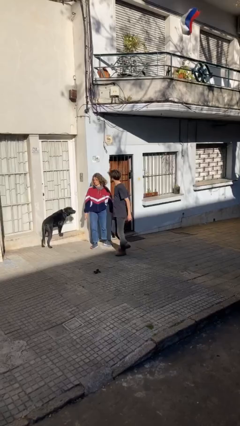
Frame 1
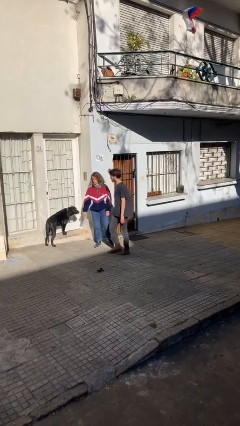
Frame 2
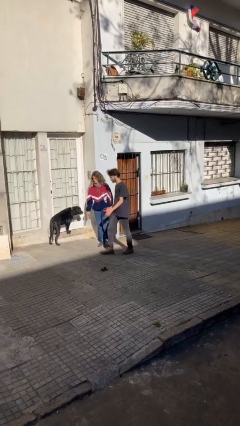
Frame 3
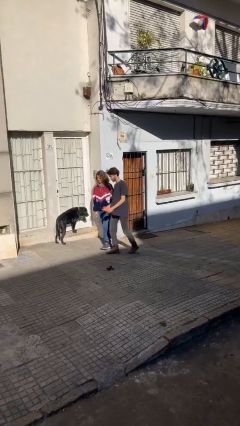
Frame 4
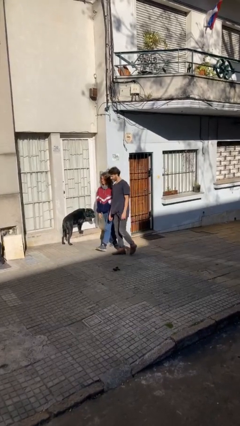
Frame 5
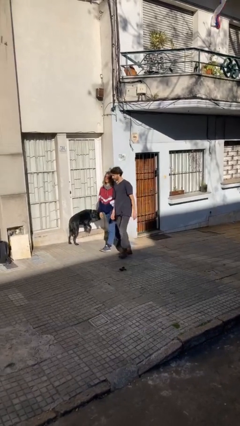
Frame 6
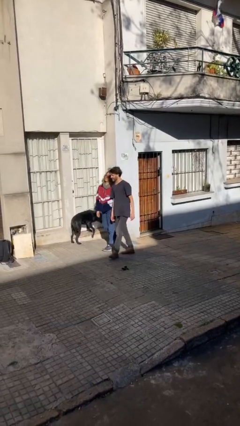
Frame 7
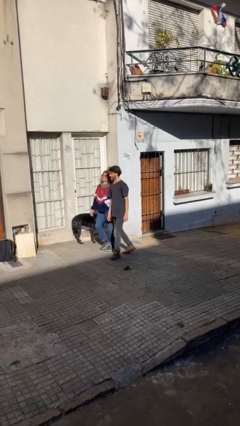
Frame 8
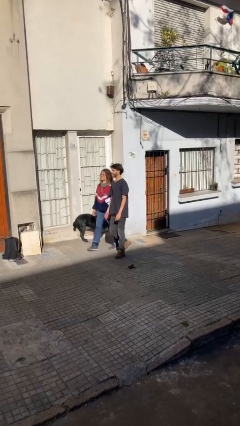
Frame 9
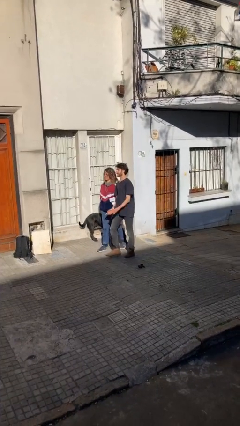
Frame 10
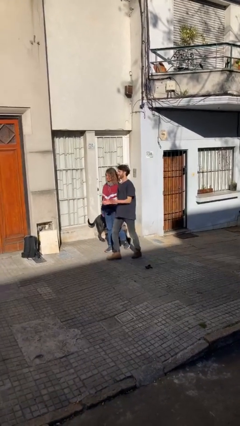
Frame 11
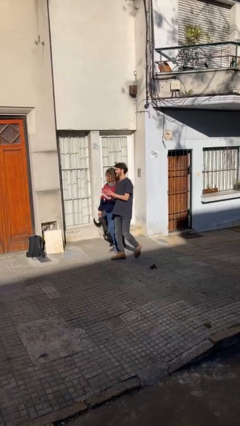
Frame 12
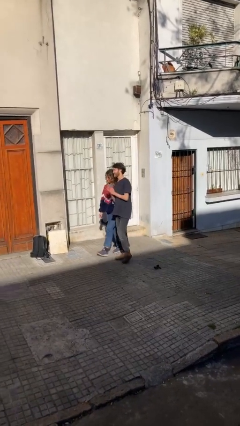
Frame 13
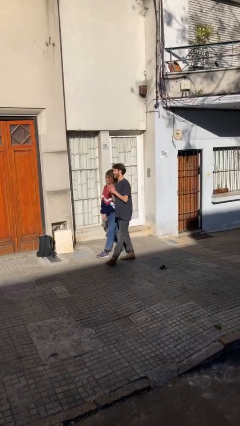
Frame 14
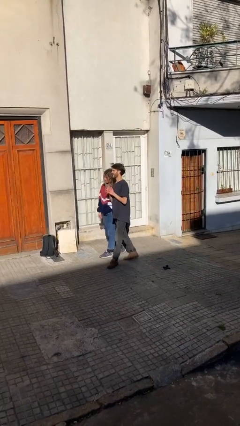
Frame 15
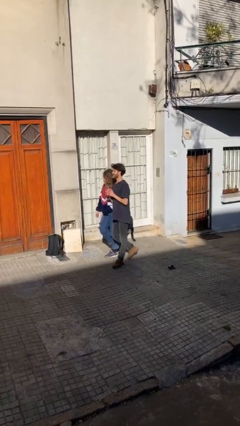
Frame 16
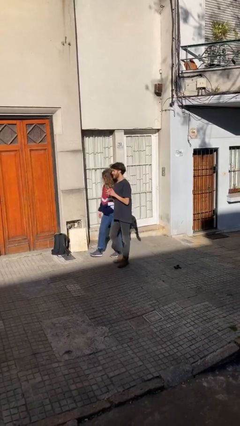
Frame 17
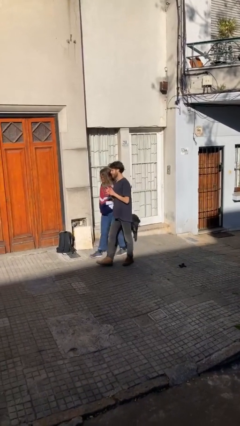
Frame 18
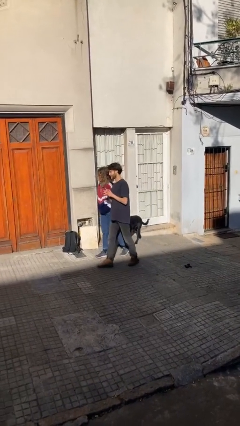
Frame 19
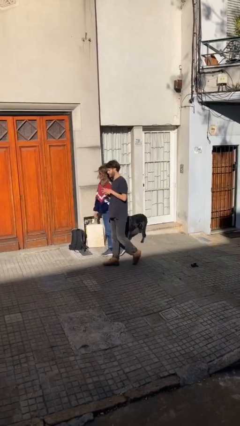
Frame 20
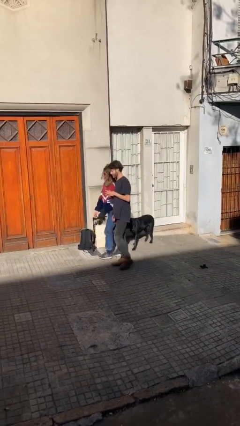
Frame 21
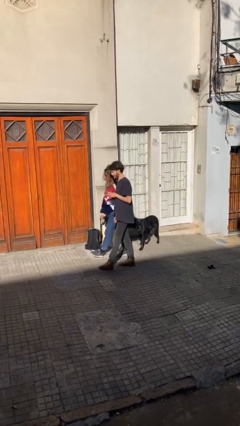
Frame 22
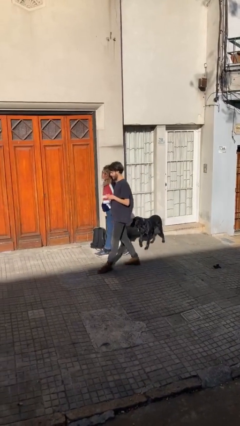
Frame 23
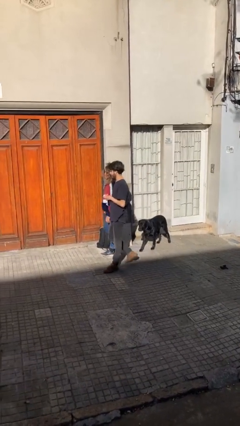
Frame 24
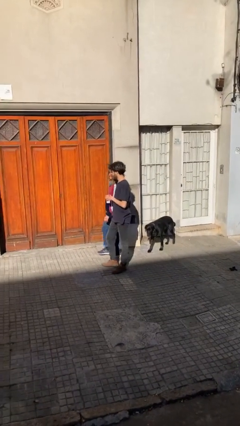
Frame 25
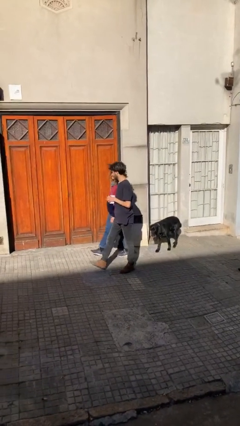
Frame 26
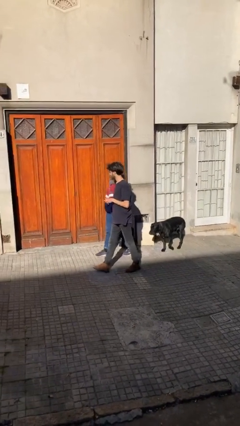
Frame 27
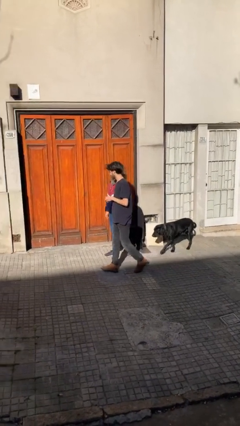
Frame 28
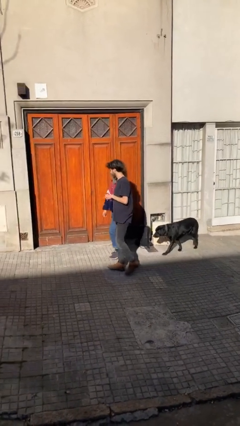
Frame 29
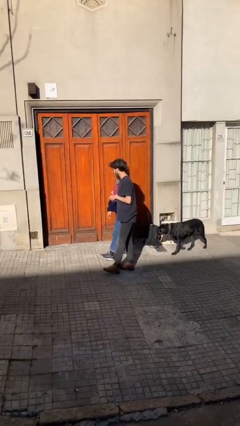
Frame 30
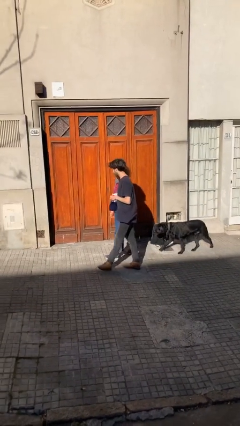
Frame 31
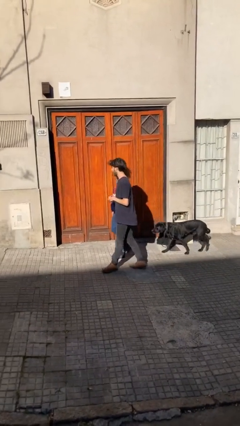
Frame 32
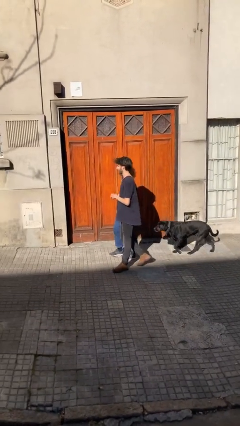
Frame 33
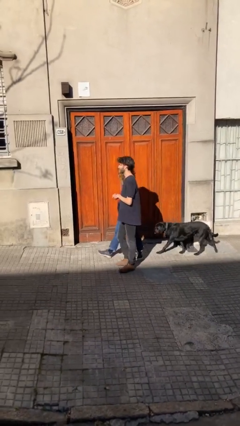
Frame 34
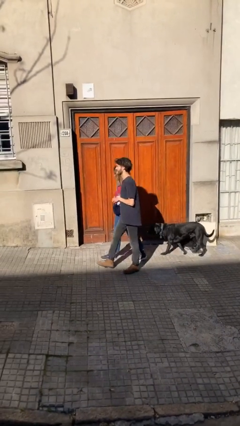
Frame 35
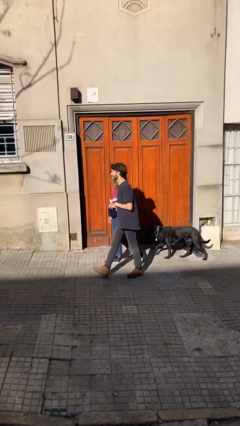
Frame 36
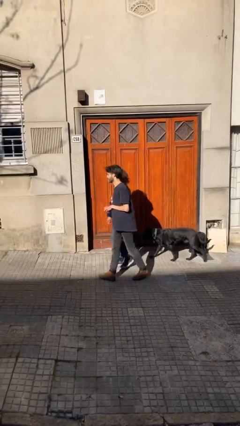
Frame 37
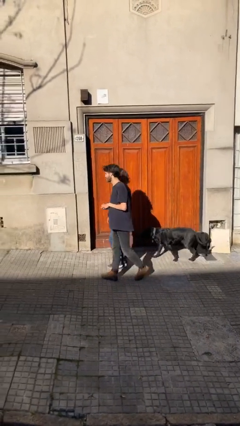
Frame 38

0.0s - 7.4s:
person talks to person

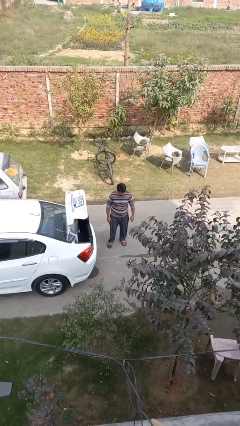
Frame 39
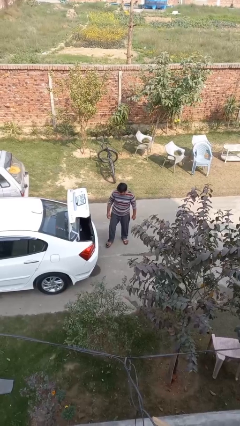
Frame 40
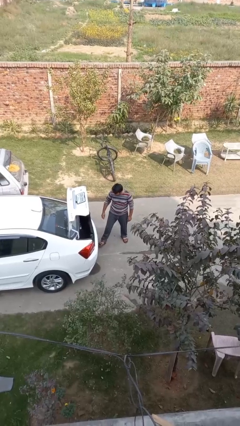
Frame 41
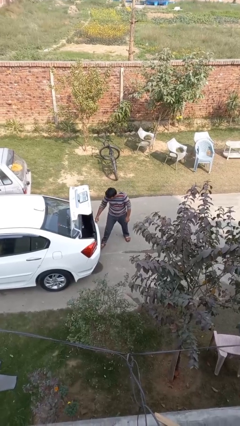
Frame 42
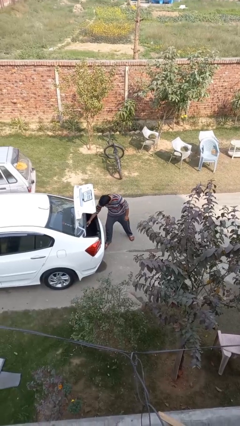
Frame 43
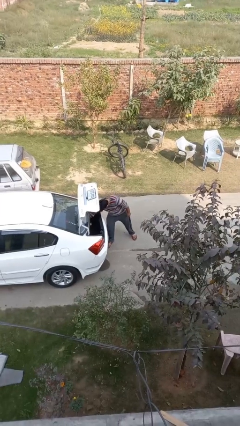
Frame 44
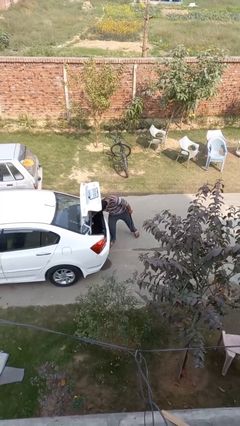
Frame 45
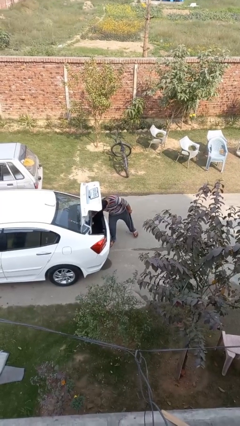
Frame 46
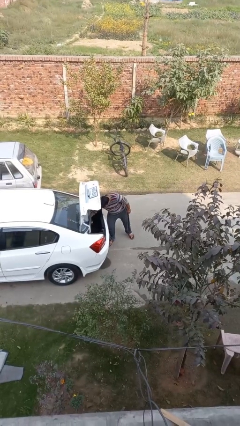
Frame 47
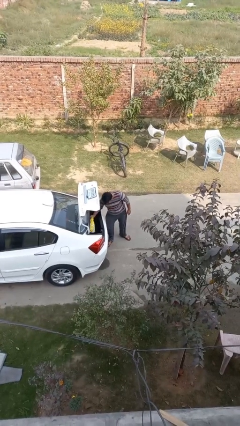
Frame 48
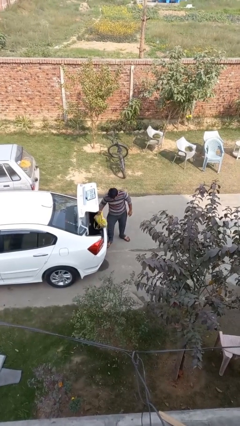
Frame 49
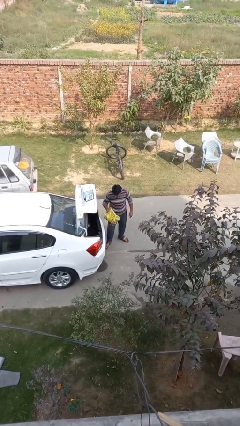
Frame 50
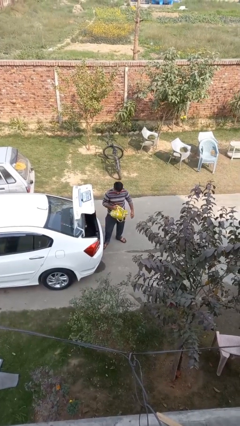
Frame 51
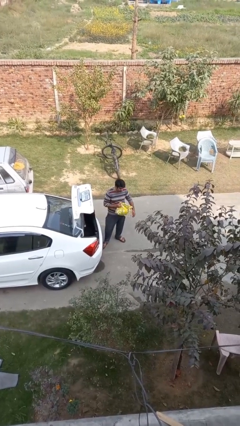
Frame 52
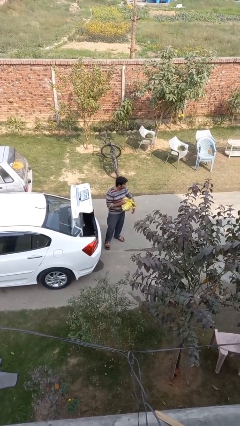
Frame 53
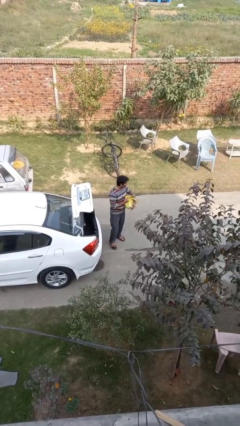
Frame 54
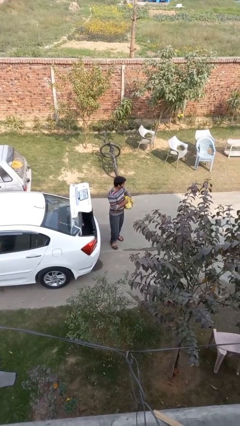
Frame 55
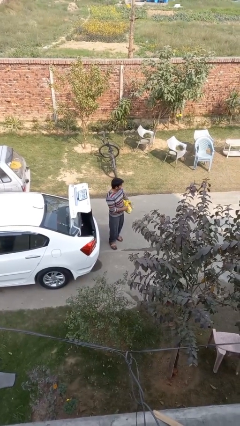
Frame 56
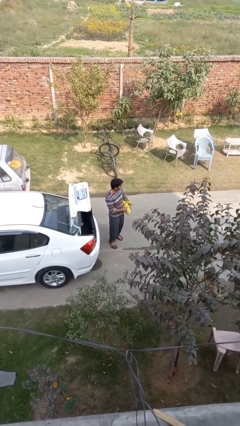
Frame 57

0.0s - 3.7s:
person unloads car

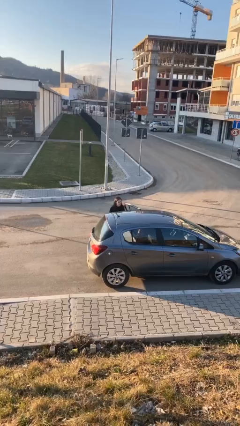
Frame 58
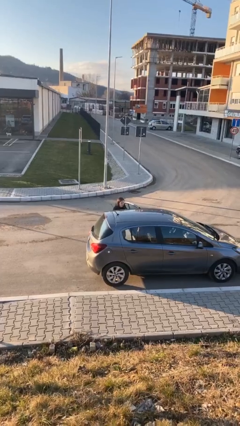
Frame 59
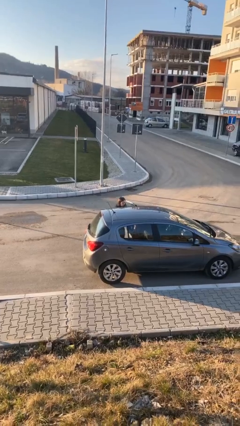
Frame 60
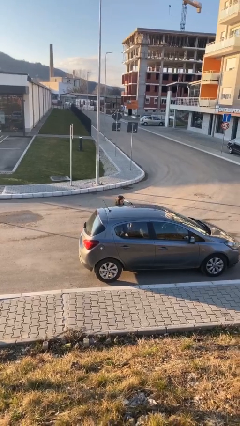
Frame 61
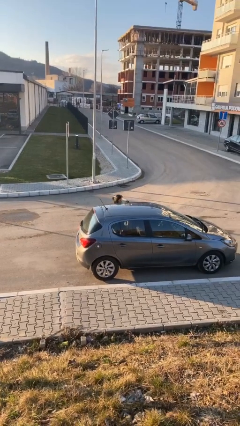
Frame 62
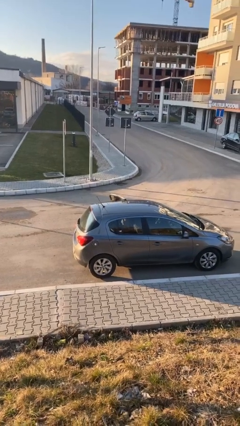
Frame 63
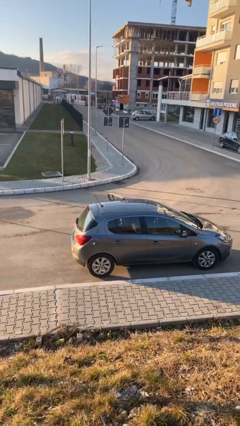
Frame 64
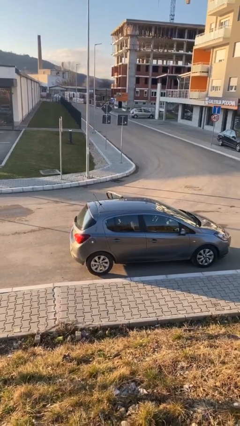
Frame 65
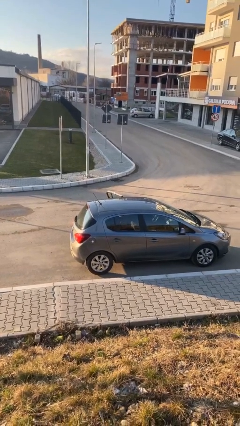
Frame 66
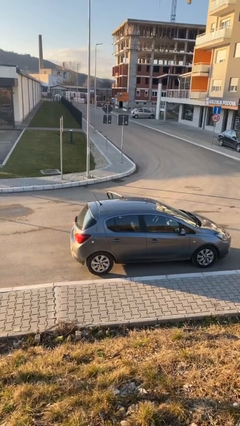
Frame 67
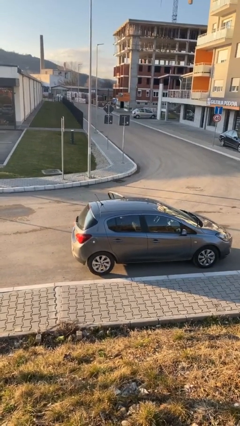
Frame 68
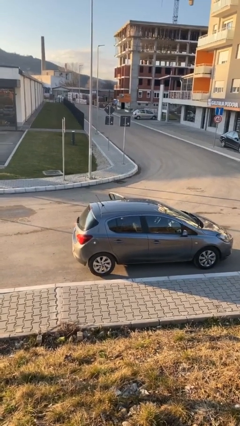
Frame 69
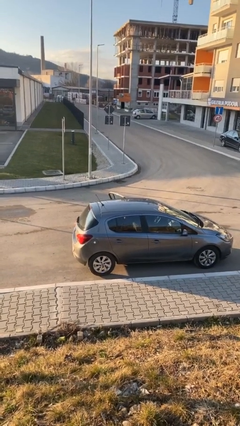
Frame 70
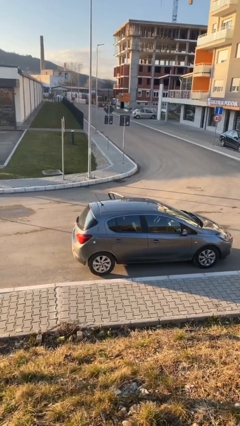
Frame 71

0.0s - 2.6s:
person enters car

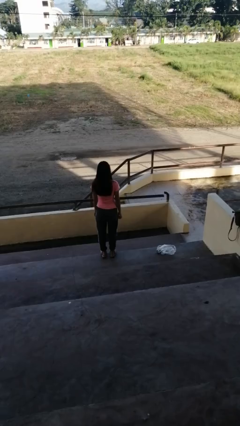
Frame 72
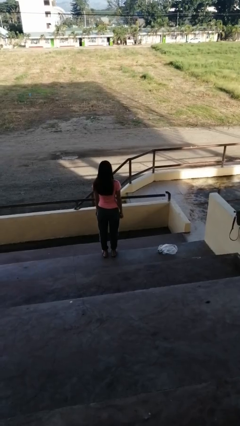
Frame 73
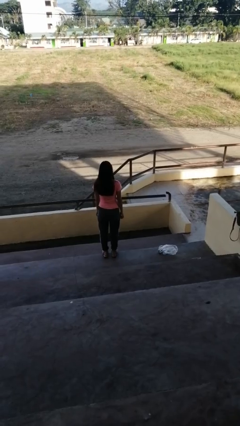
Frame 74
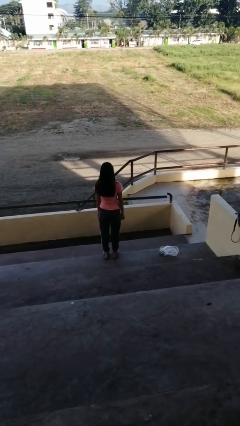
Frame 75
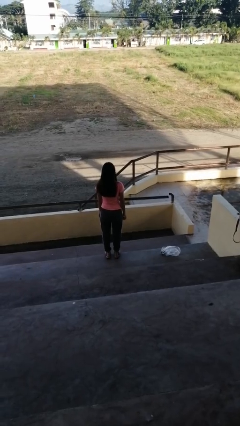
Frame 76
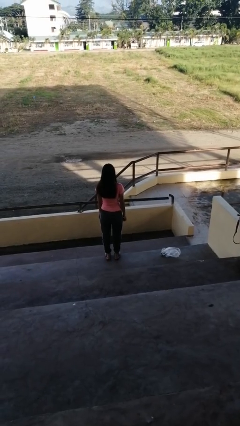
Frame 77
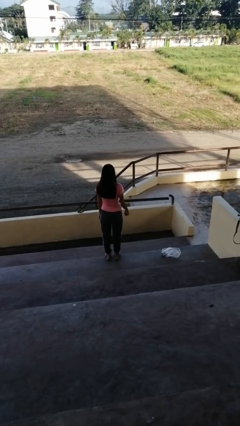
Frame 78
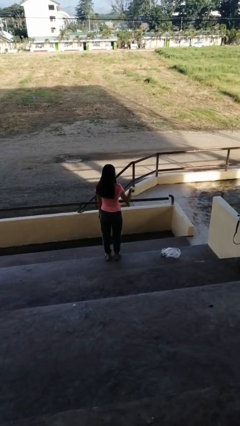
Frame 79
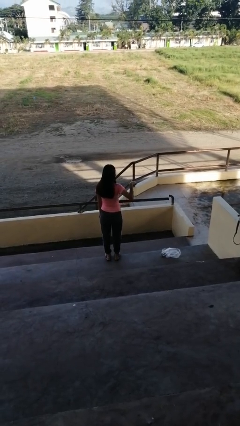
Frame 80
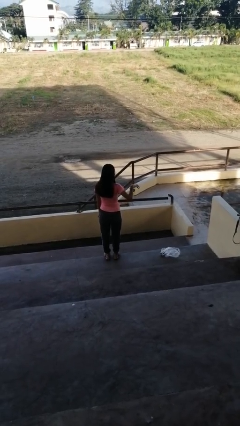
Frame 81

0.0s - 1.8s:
person drops object

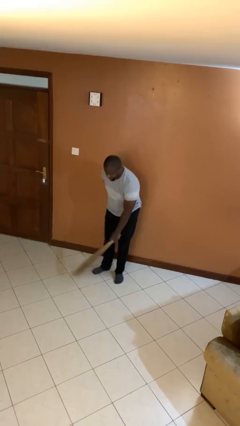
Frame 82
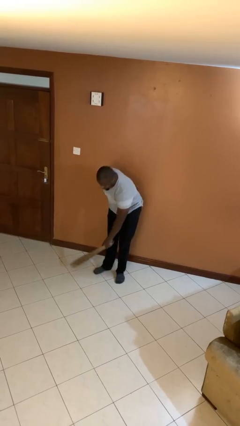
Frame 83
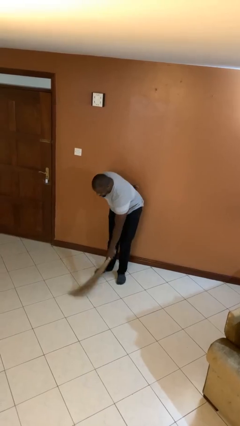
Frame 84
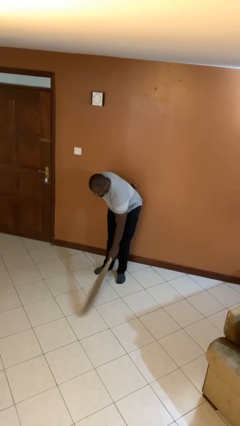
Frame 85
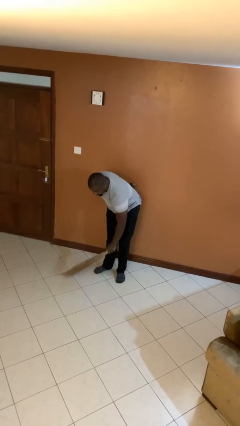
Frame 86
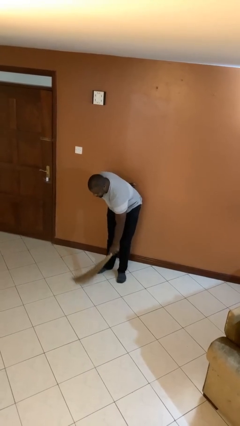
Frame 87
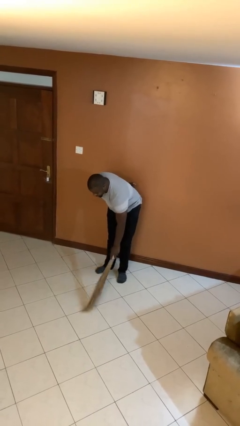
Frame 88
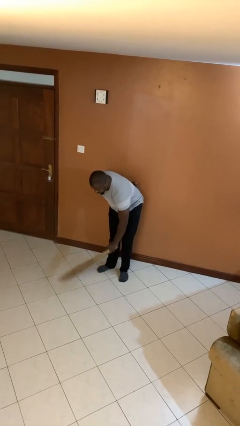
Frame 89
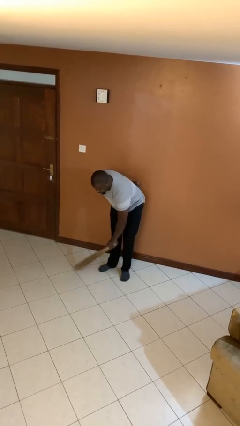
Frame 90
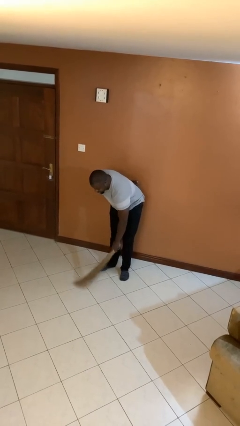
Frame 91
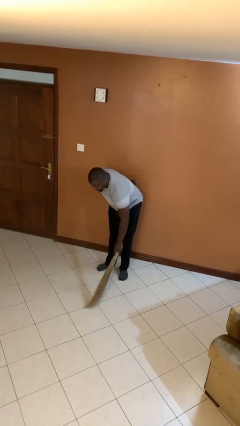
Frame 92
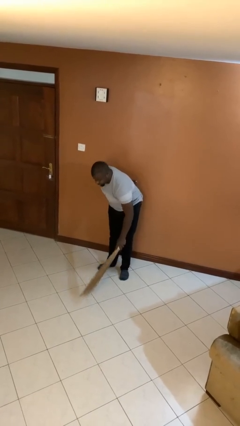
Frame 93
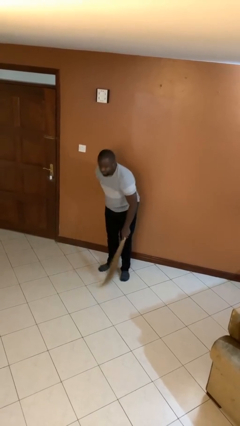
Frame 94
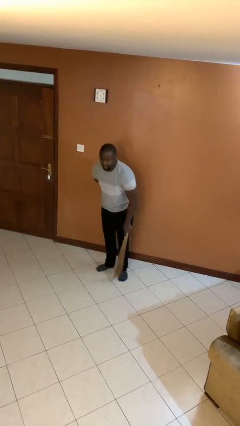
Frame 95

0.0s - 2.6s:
person sweeps floor
